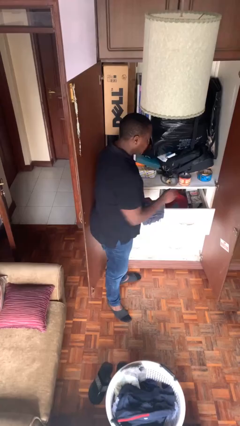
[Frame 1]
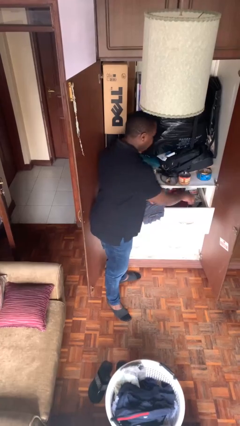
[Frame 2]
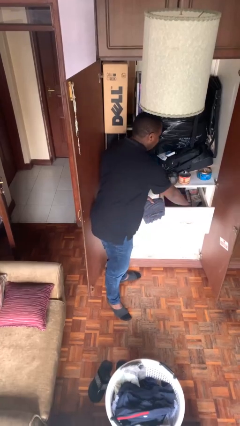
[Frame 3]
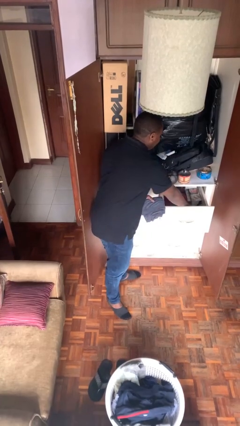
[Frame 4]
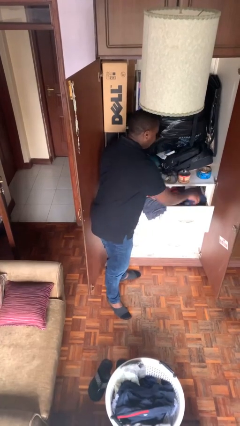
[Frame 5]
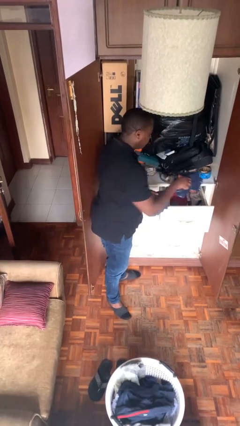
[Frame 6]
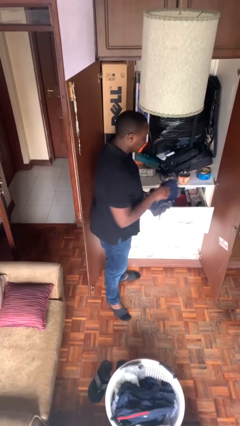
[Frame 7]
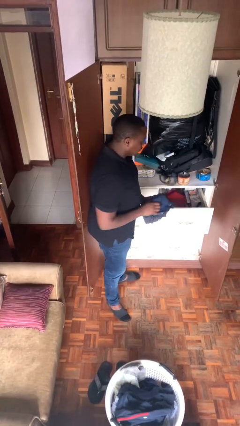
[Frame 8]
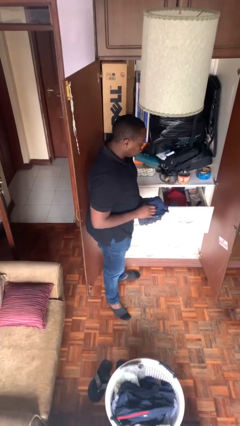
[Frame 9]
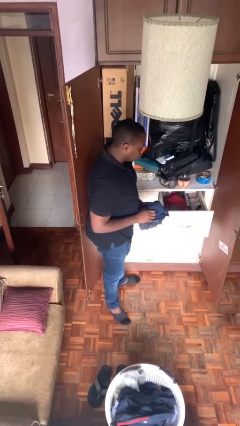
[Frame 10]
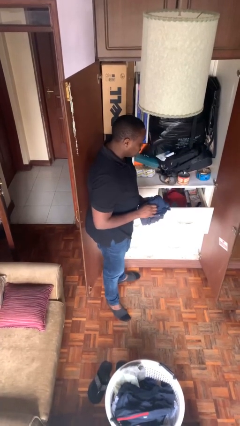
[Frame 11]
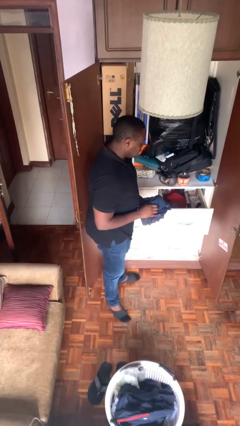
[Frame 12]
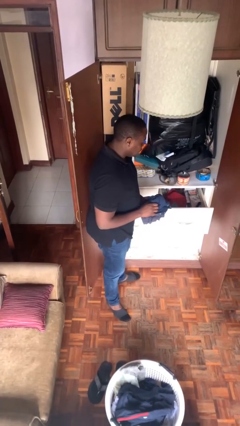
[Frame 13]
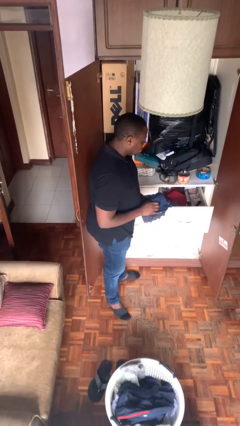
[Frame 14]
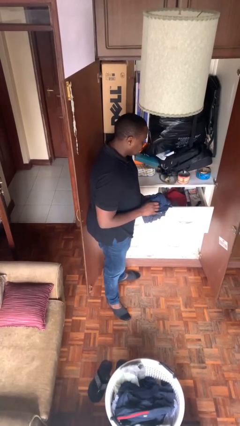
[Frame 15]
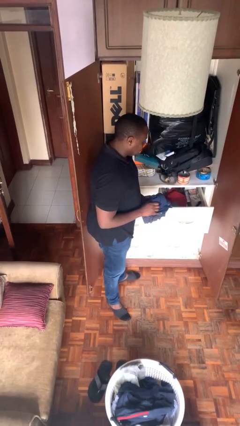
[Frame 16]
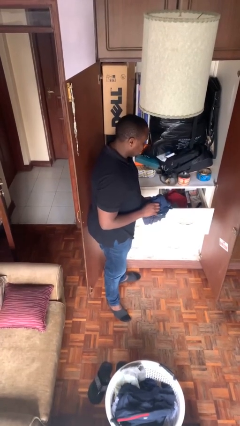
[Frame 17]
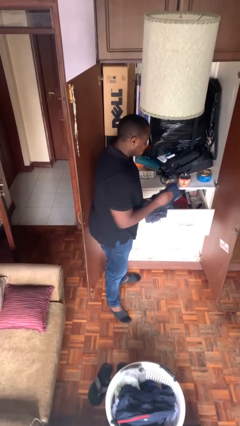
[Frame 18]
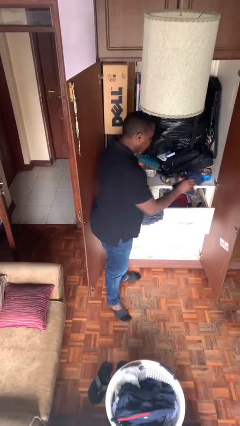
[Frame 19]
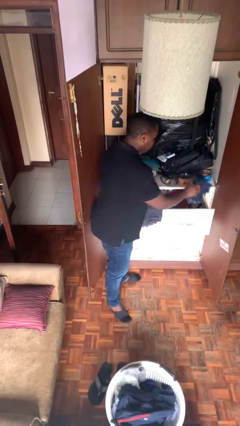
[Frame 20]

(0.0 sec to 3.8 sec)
person takes clothes from dresser

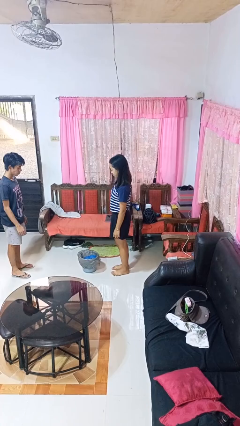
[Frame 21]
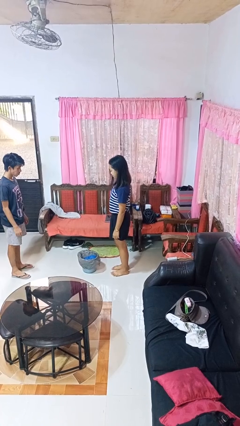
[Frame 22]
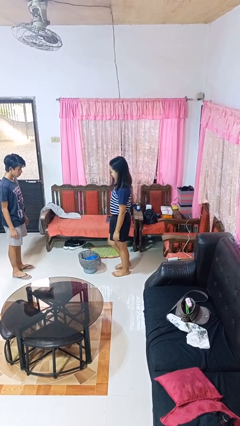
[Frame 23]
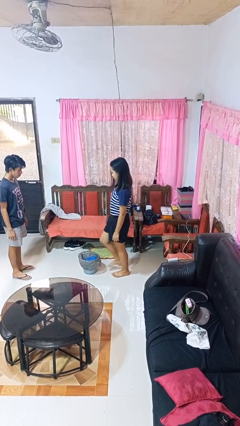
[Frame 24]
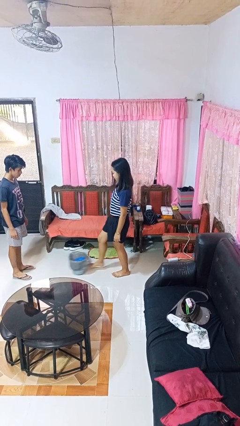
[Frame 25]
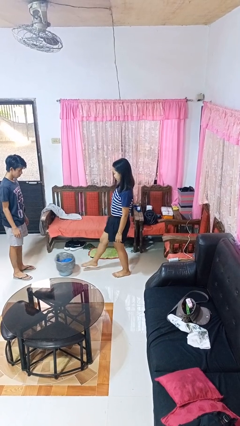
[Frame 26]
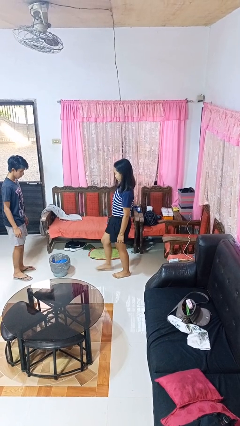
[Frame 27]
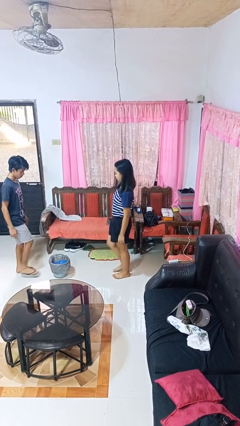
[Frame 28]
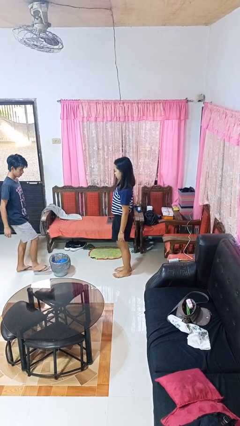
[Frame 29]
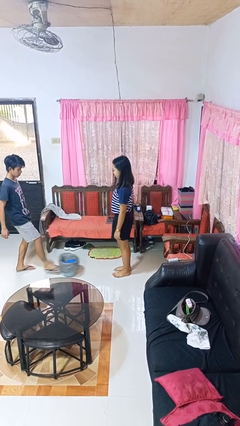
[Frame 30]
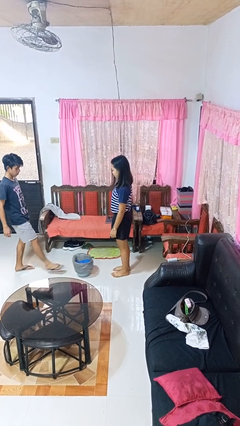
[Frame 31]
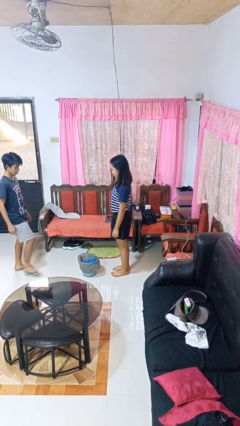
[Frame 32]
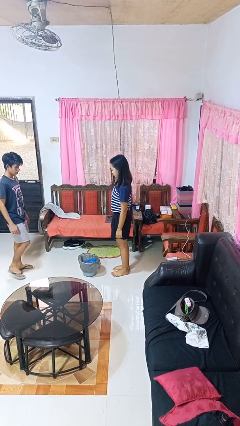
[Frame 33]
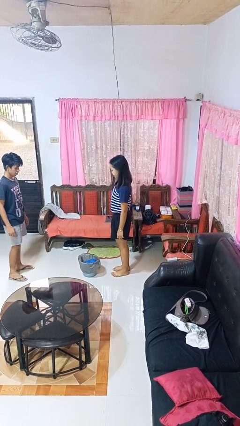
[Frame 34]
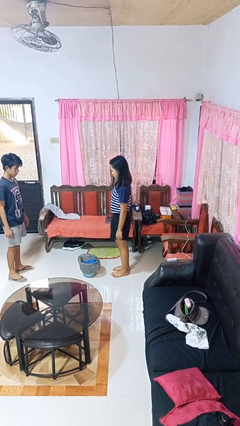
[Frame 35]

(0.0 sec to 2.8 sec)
person kicks object to person

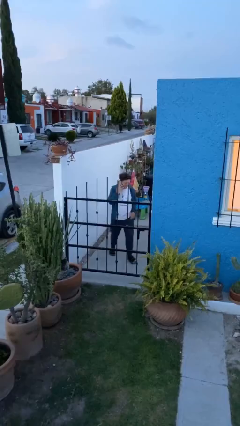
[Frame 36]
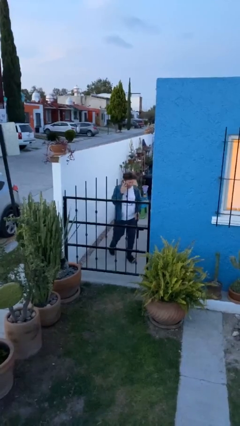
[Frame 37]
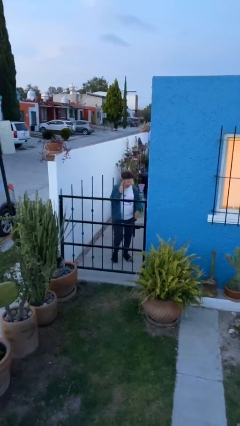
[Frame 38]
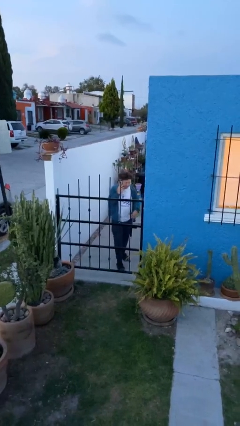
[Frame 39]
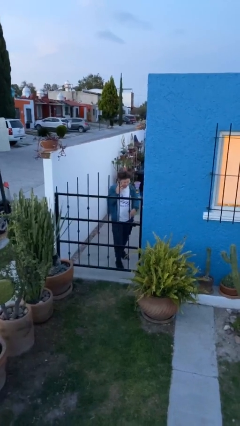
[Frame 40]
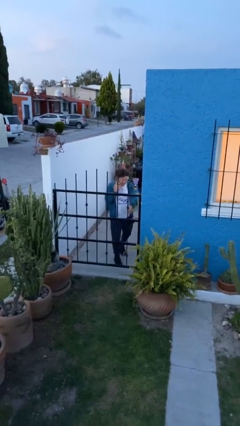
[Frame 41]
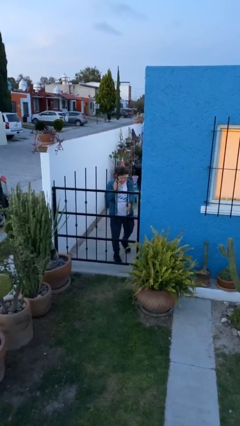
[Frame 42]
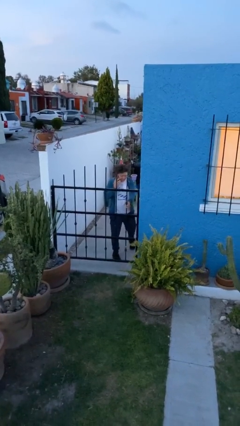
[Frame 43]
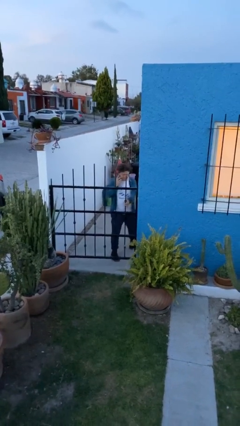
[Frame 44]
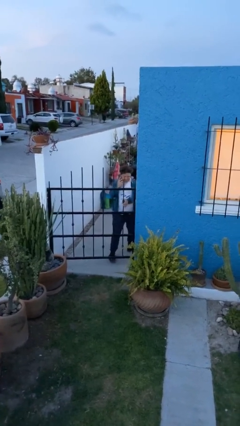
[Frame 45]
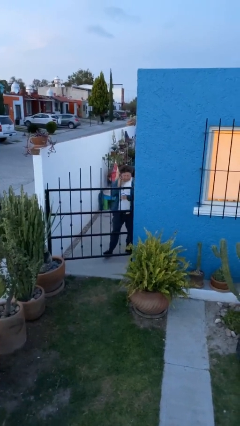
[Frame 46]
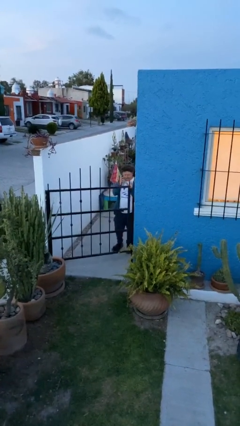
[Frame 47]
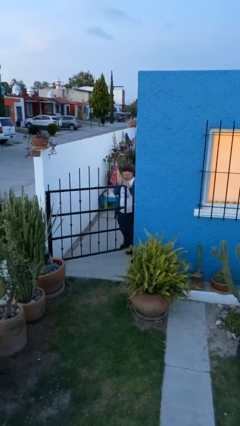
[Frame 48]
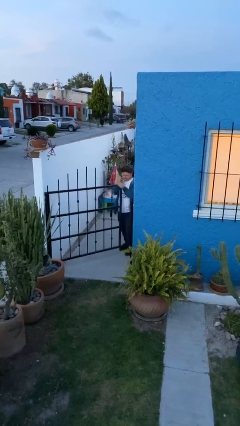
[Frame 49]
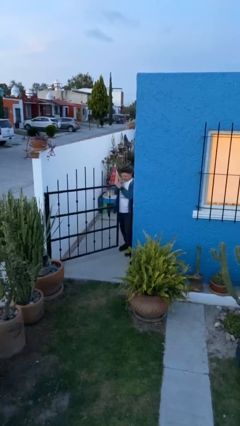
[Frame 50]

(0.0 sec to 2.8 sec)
person opens facility door

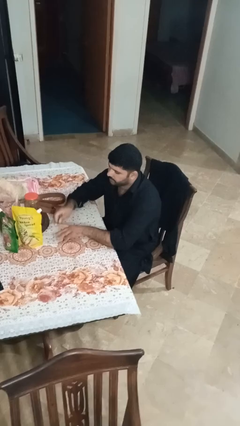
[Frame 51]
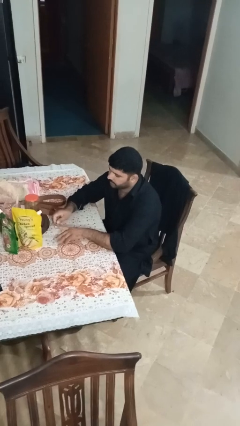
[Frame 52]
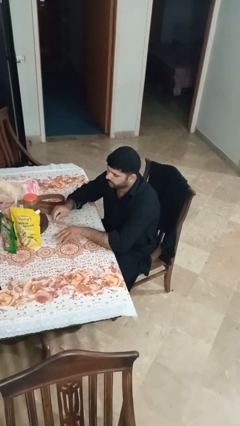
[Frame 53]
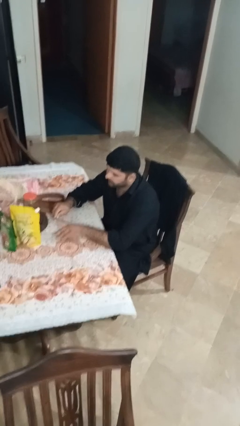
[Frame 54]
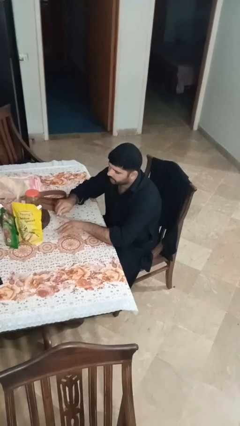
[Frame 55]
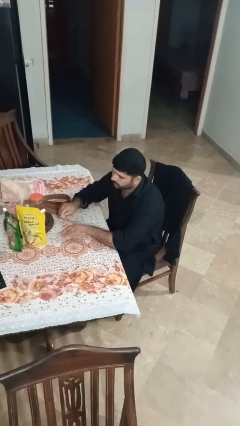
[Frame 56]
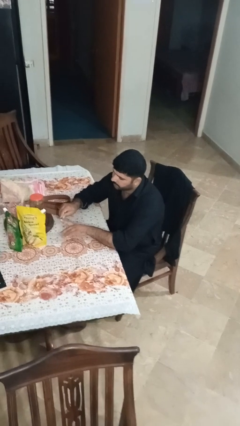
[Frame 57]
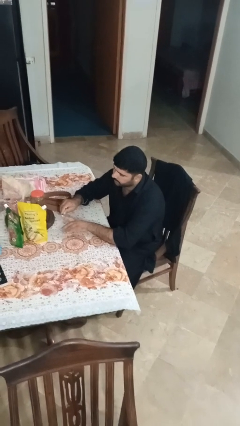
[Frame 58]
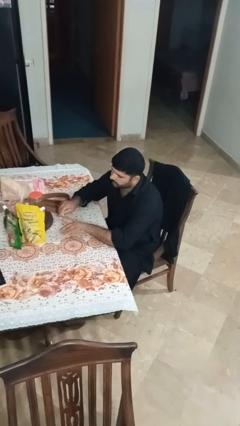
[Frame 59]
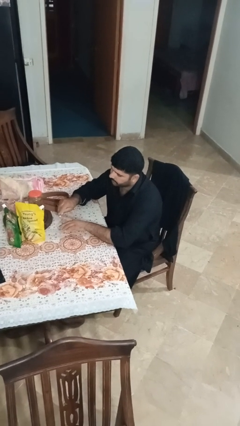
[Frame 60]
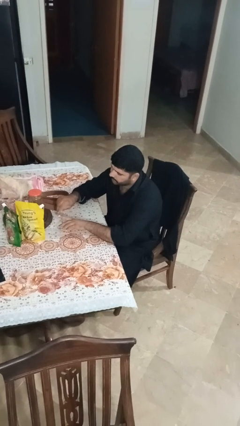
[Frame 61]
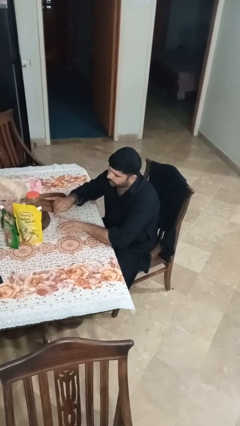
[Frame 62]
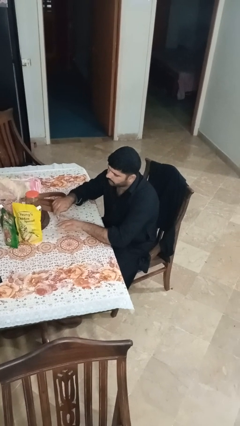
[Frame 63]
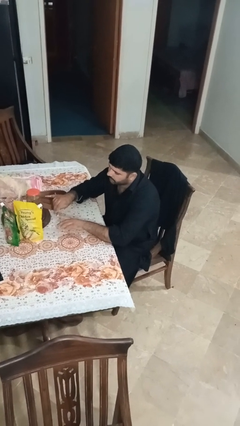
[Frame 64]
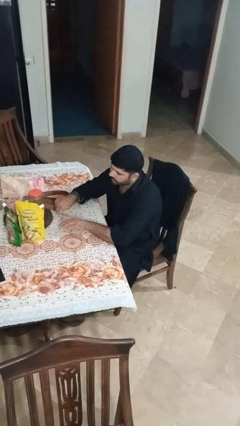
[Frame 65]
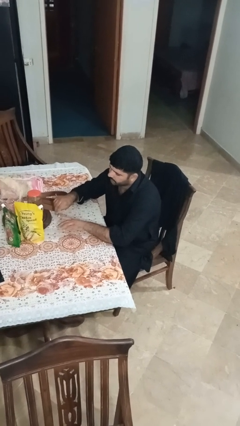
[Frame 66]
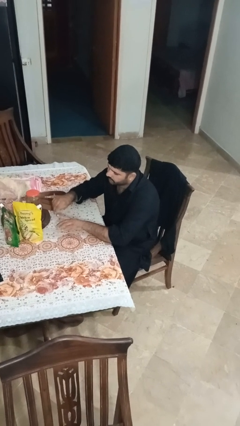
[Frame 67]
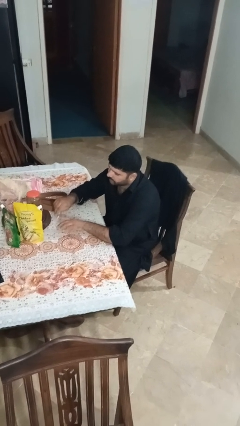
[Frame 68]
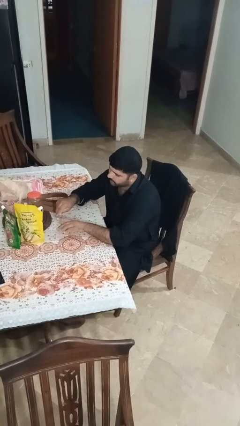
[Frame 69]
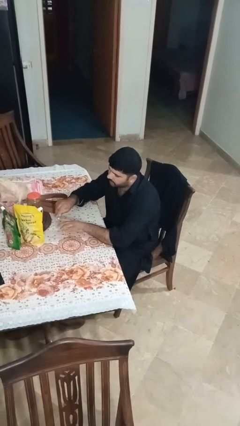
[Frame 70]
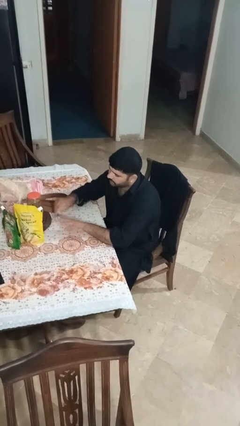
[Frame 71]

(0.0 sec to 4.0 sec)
person files fingernails

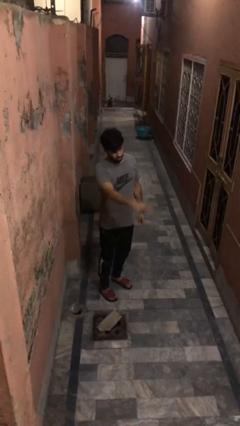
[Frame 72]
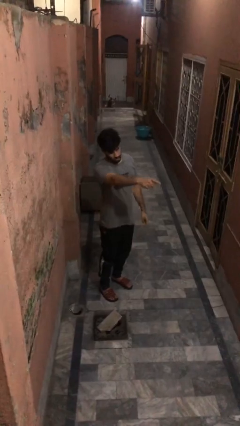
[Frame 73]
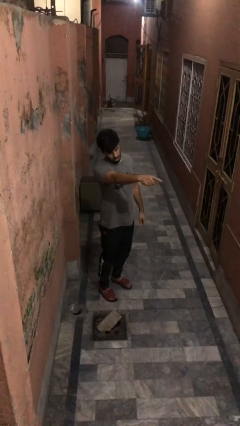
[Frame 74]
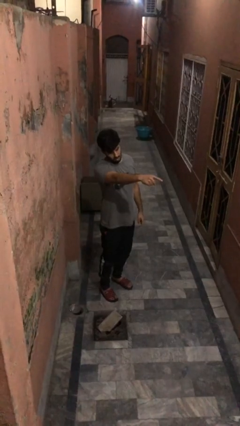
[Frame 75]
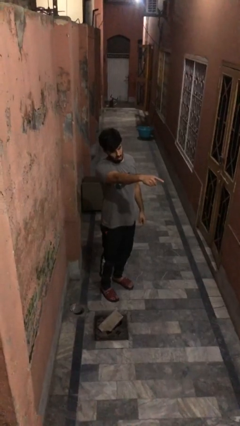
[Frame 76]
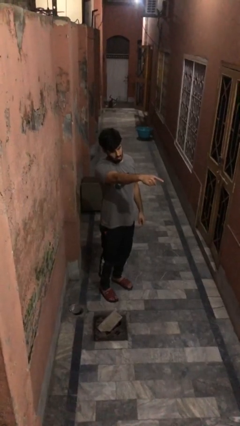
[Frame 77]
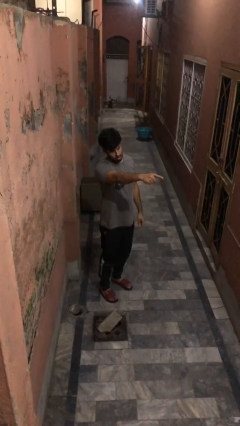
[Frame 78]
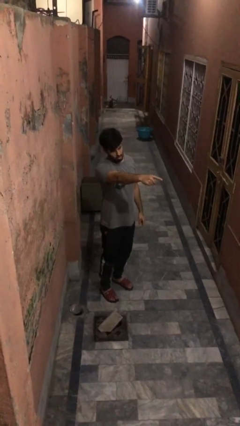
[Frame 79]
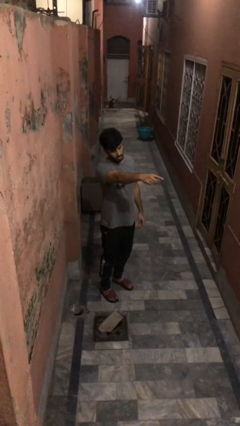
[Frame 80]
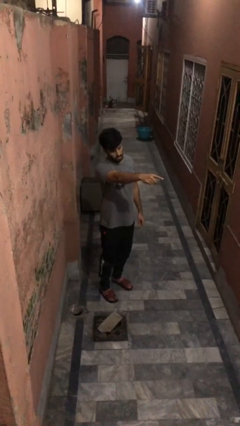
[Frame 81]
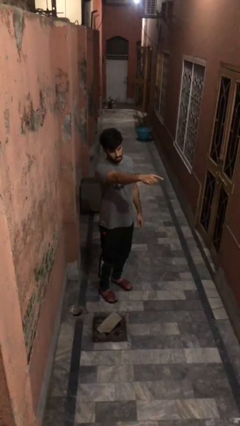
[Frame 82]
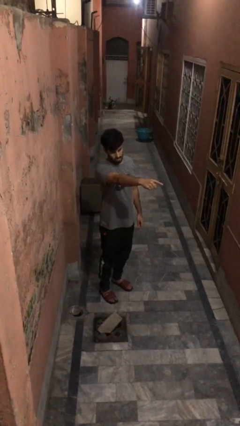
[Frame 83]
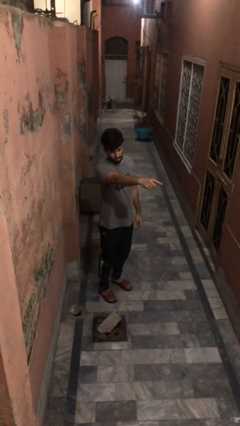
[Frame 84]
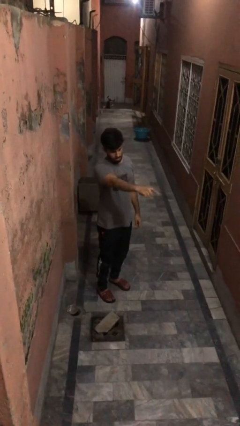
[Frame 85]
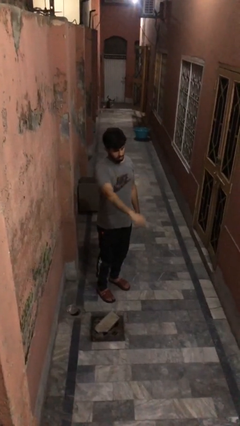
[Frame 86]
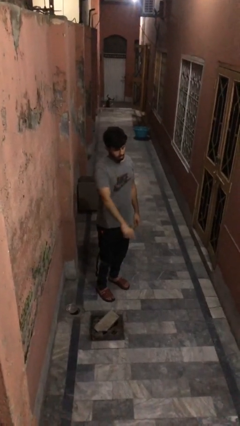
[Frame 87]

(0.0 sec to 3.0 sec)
person points at person

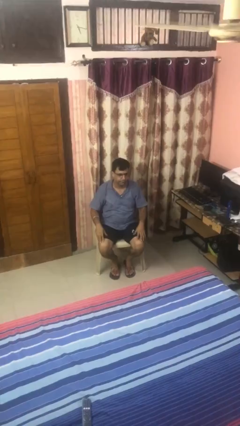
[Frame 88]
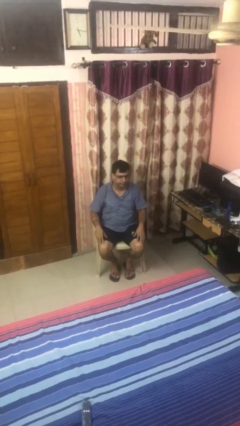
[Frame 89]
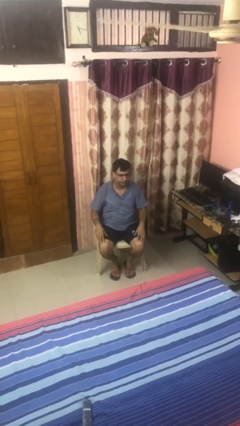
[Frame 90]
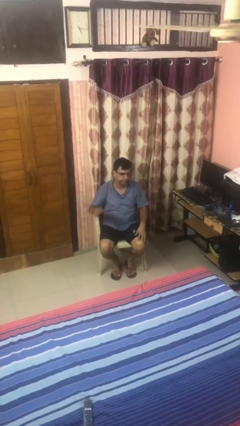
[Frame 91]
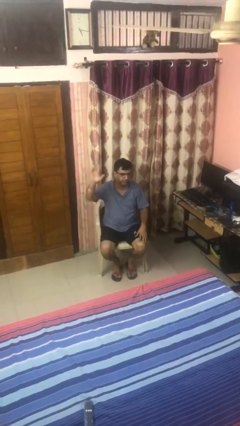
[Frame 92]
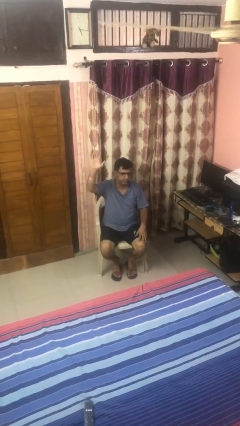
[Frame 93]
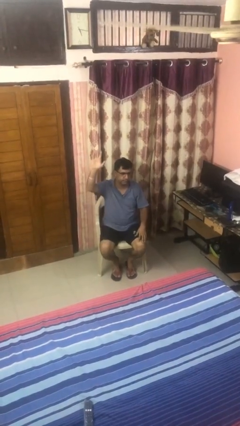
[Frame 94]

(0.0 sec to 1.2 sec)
person gestures raise hand
